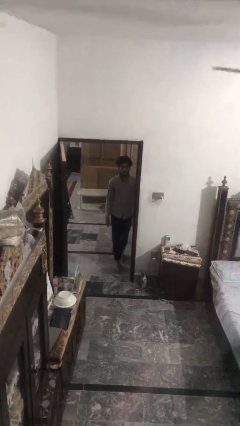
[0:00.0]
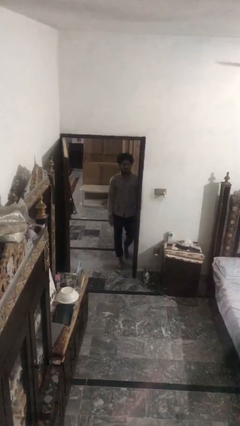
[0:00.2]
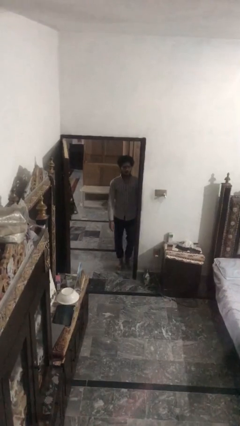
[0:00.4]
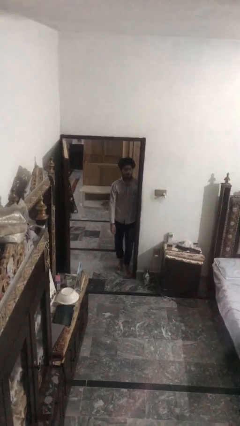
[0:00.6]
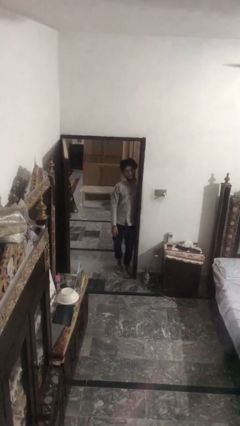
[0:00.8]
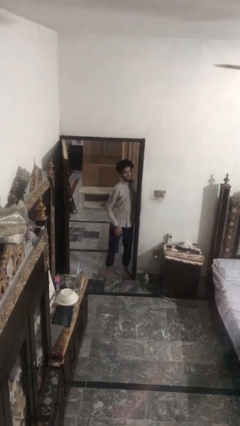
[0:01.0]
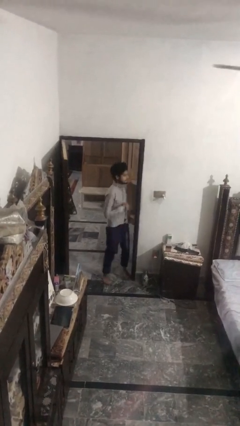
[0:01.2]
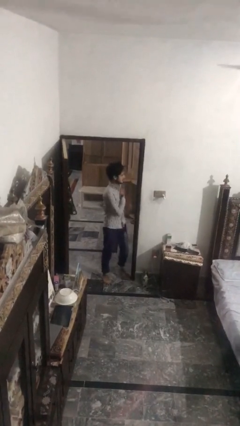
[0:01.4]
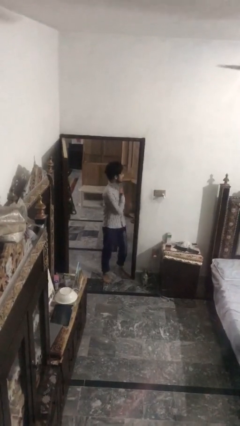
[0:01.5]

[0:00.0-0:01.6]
person bumps into wall

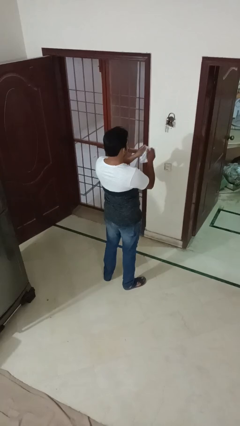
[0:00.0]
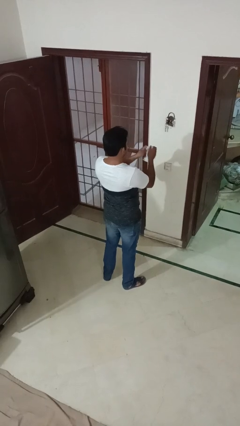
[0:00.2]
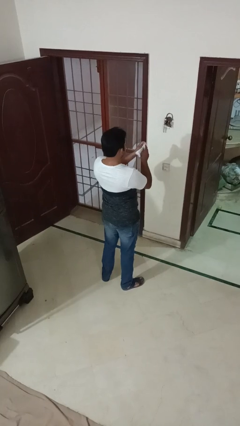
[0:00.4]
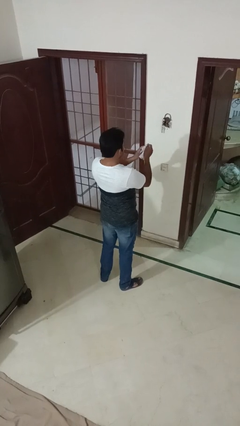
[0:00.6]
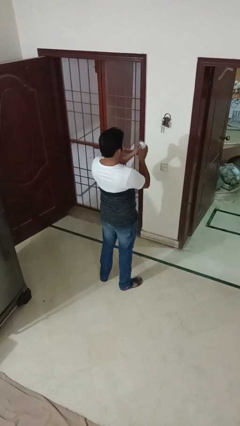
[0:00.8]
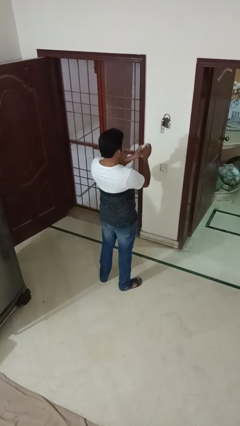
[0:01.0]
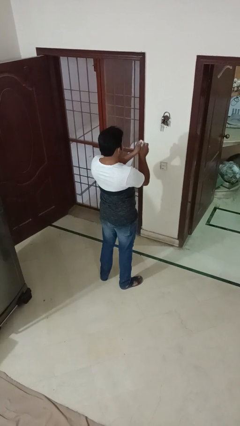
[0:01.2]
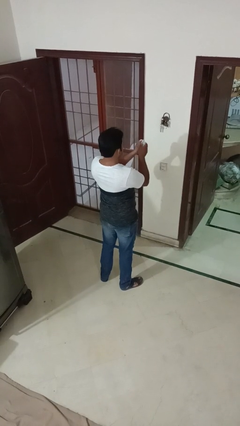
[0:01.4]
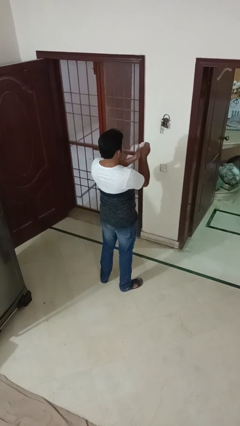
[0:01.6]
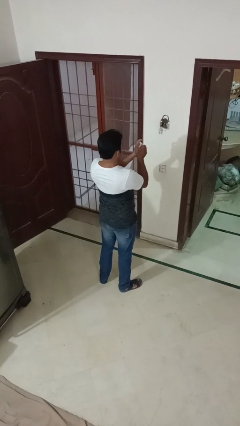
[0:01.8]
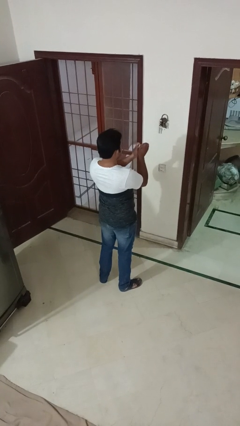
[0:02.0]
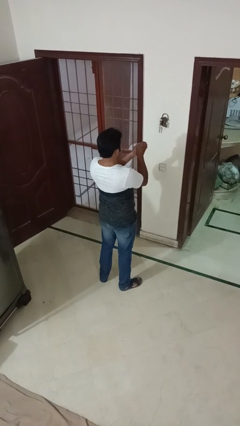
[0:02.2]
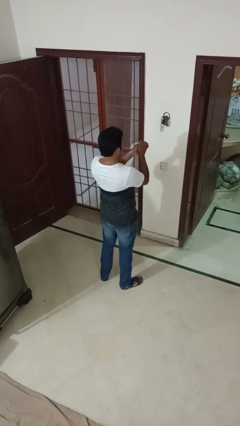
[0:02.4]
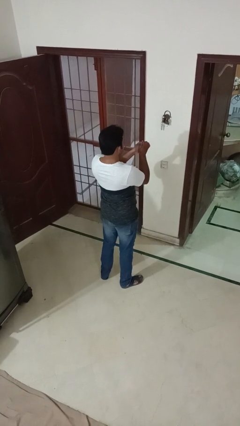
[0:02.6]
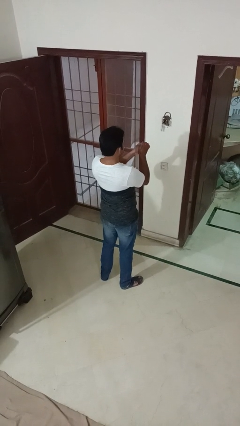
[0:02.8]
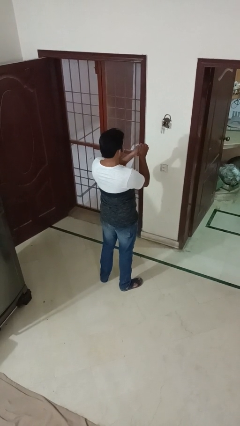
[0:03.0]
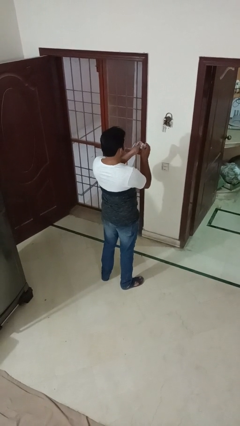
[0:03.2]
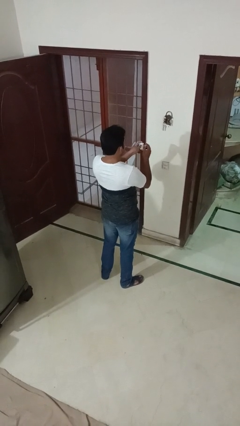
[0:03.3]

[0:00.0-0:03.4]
person crumples paper

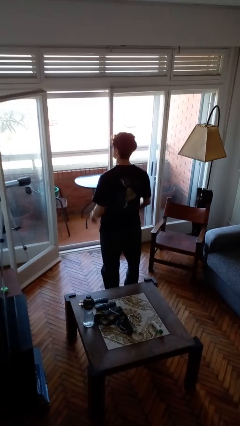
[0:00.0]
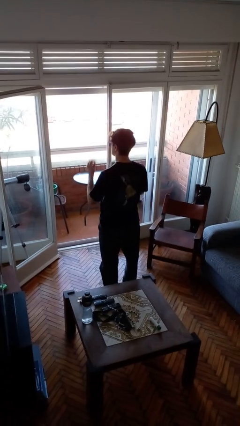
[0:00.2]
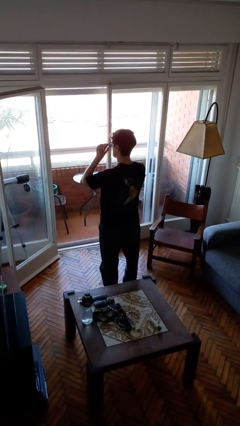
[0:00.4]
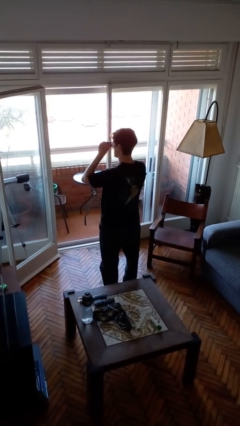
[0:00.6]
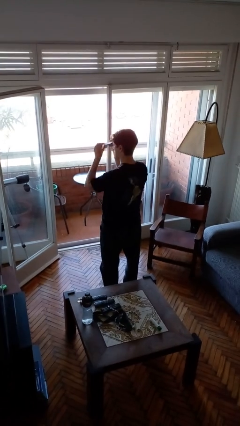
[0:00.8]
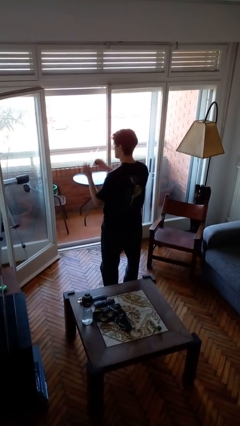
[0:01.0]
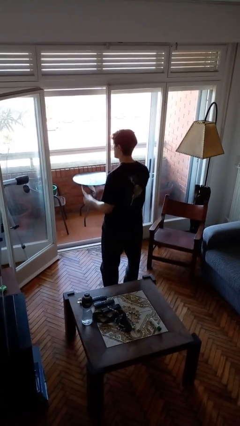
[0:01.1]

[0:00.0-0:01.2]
person takes off sunglasses

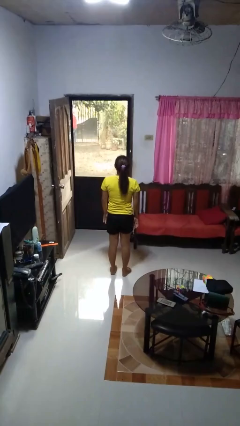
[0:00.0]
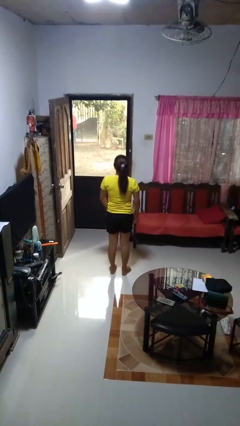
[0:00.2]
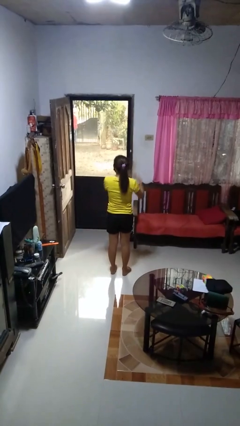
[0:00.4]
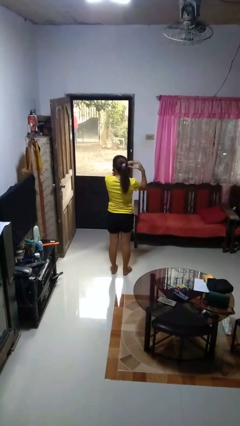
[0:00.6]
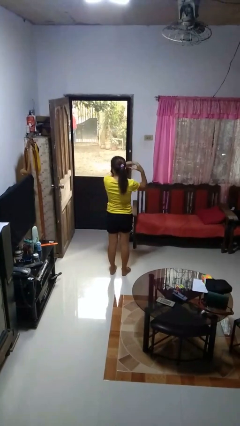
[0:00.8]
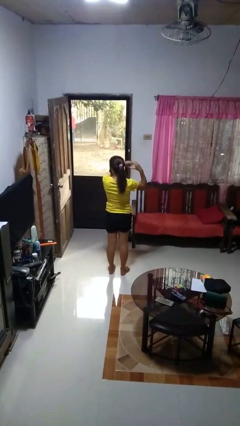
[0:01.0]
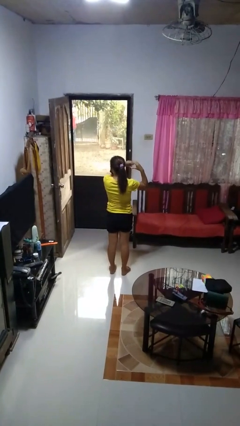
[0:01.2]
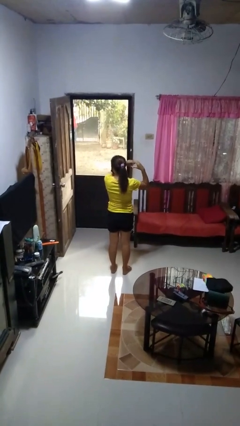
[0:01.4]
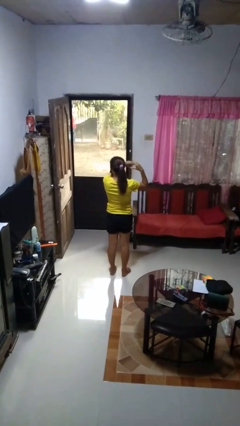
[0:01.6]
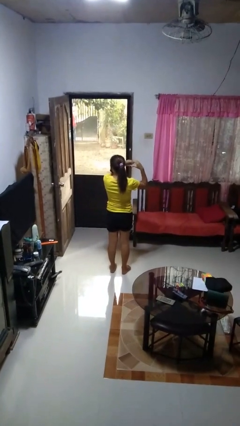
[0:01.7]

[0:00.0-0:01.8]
person gestures heart

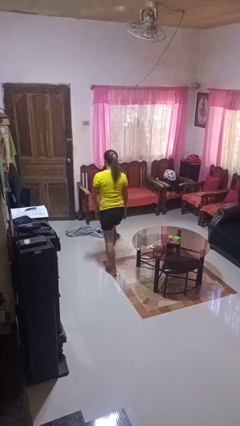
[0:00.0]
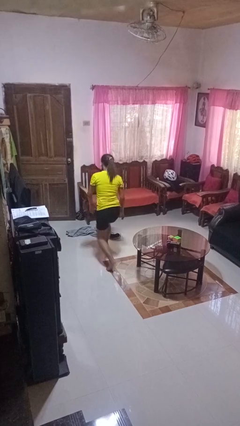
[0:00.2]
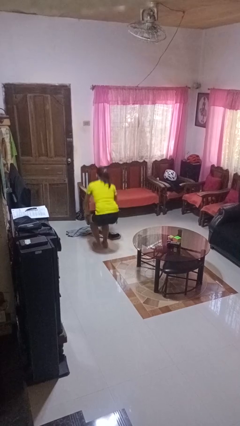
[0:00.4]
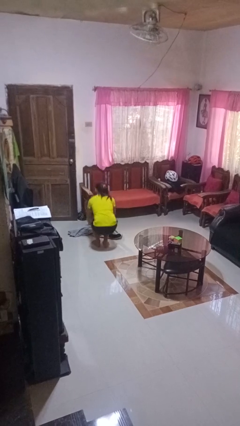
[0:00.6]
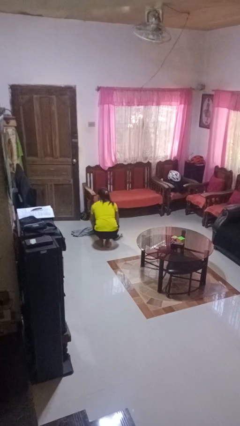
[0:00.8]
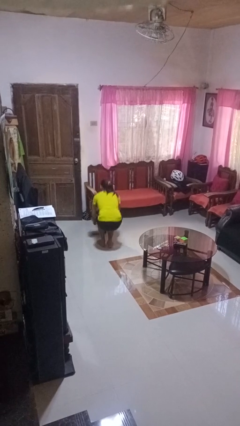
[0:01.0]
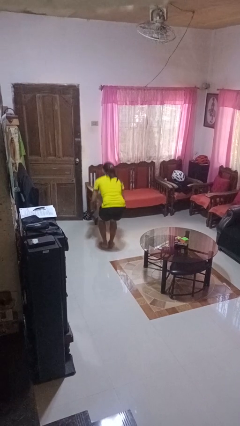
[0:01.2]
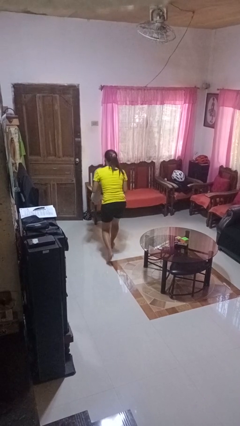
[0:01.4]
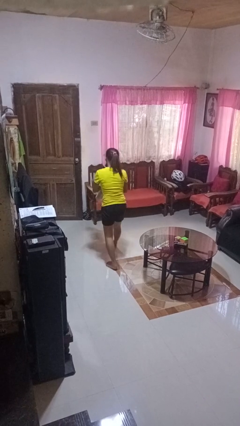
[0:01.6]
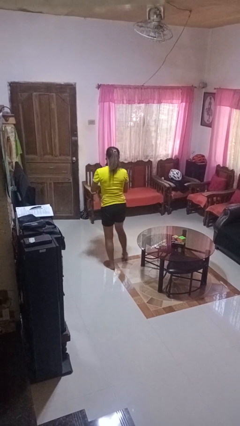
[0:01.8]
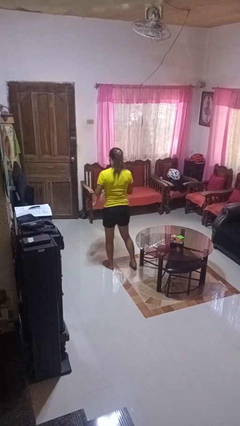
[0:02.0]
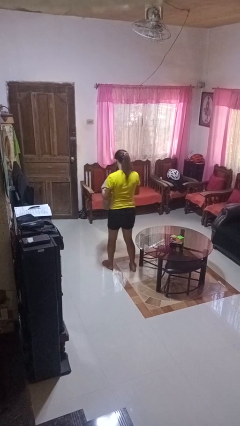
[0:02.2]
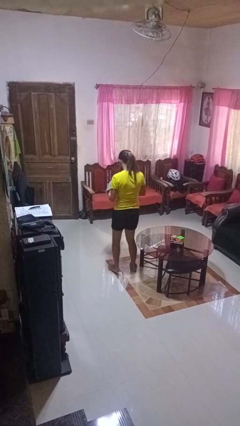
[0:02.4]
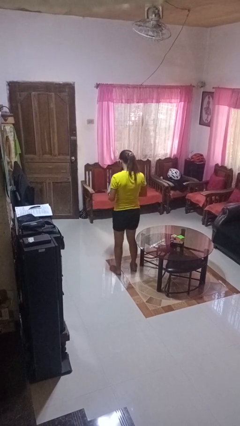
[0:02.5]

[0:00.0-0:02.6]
person picks up object from floor

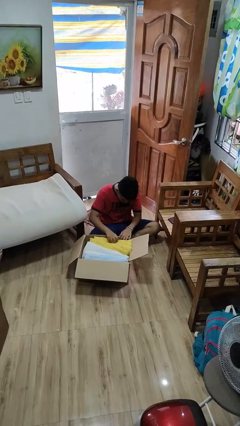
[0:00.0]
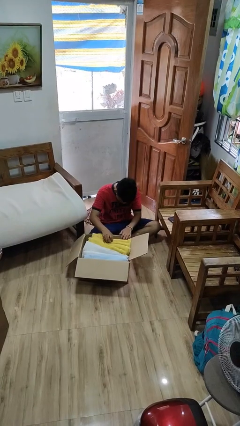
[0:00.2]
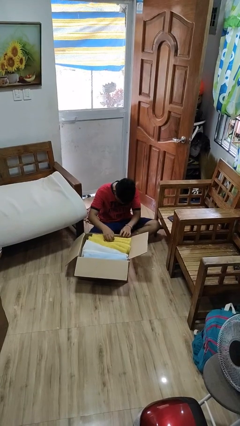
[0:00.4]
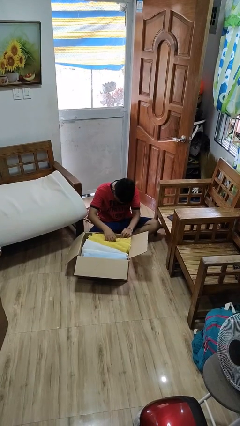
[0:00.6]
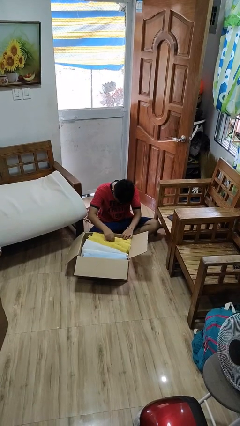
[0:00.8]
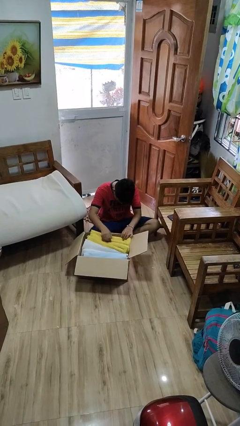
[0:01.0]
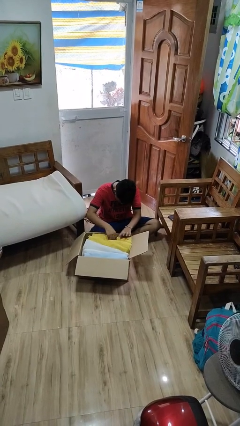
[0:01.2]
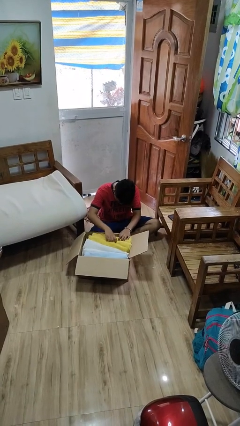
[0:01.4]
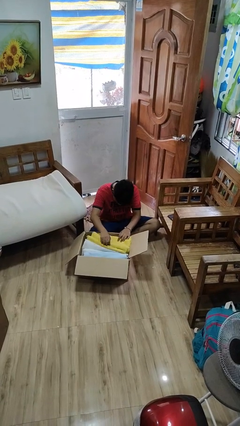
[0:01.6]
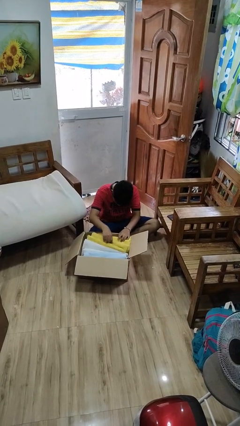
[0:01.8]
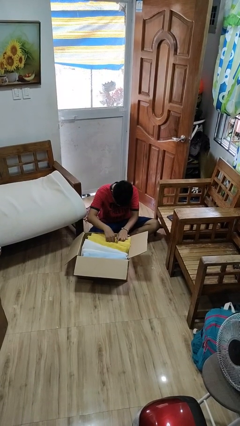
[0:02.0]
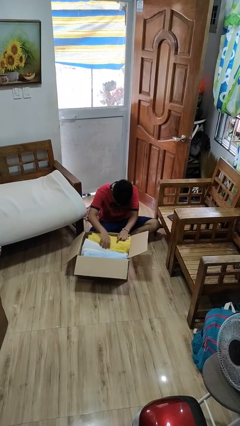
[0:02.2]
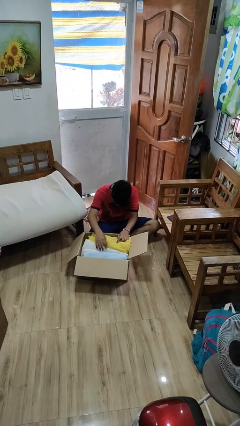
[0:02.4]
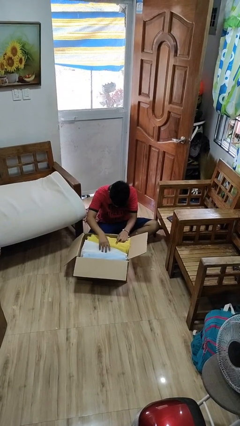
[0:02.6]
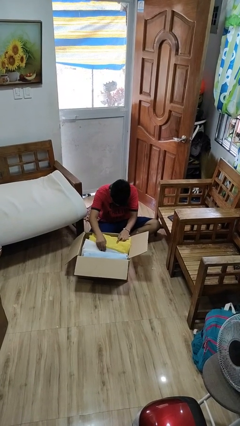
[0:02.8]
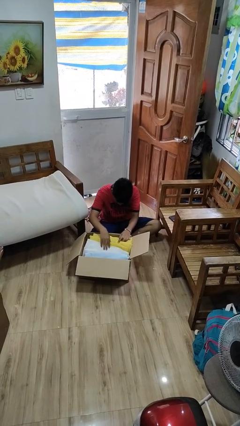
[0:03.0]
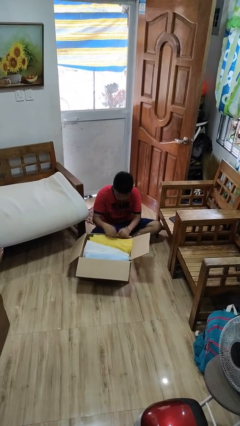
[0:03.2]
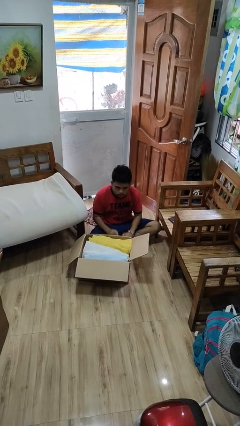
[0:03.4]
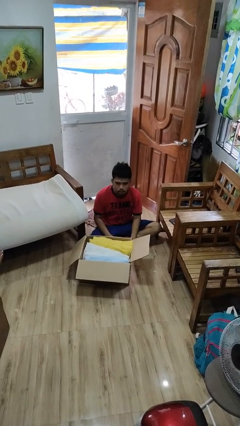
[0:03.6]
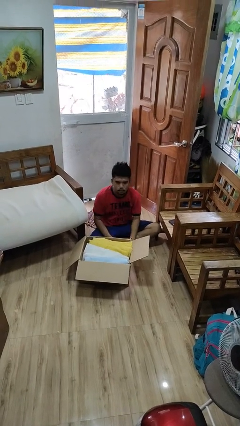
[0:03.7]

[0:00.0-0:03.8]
person searches in box

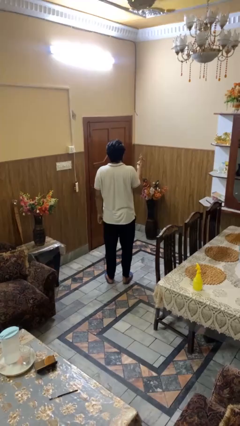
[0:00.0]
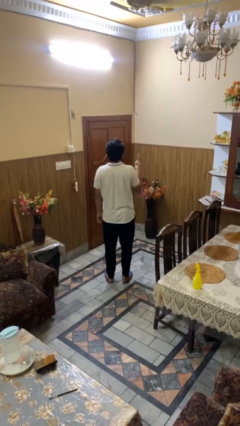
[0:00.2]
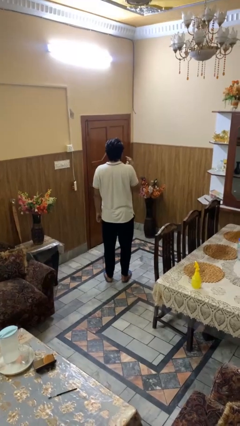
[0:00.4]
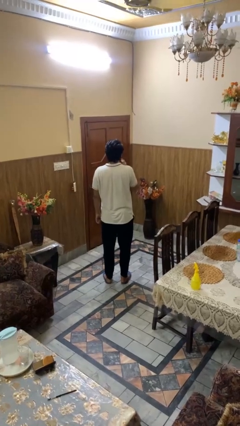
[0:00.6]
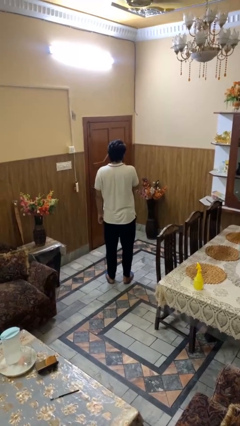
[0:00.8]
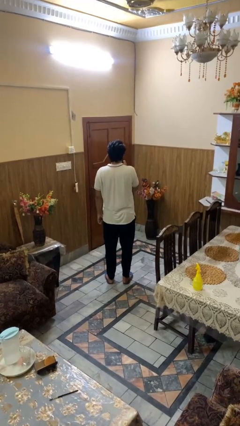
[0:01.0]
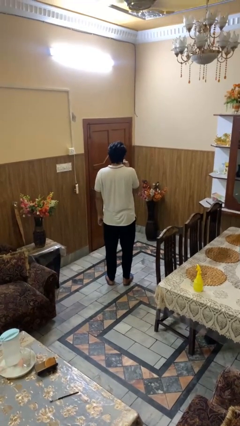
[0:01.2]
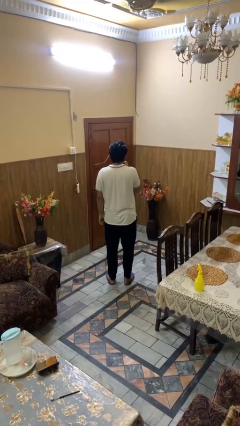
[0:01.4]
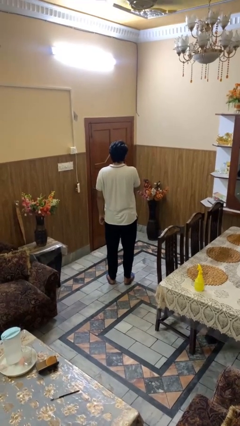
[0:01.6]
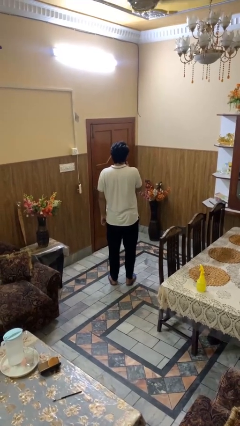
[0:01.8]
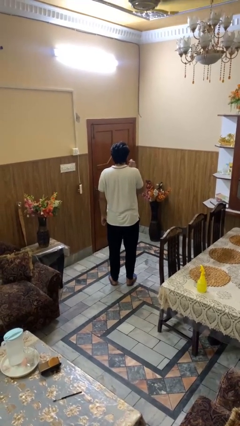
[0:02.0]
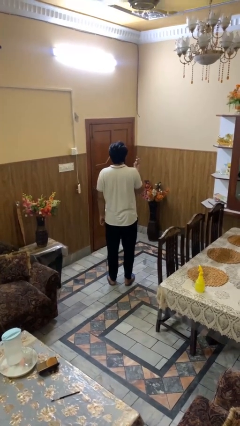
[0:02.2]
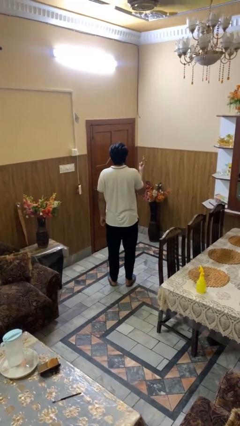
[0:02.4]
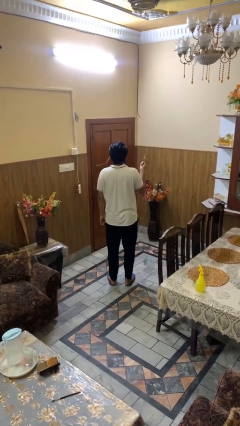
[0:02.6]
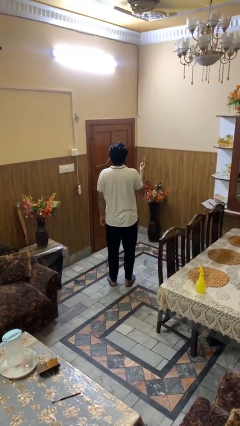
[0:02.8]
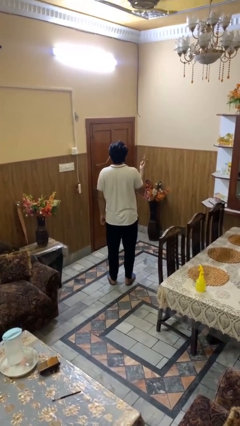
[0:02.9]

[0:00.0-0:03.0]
person applies lip makeup
